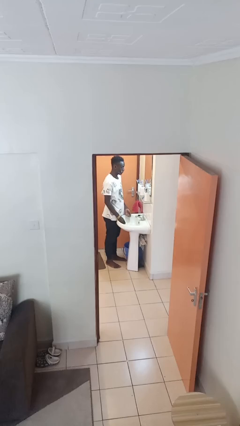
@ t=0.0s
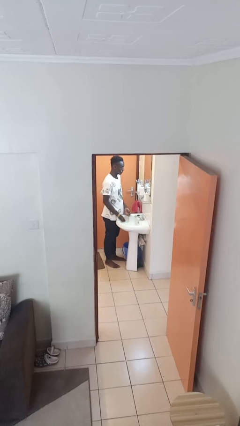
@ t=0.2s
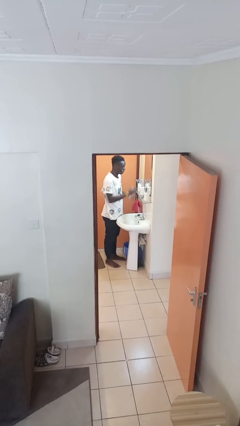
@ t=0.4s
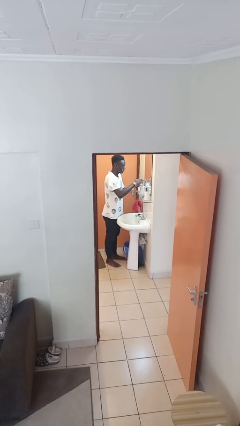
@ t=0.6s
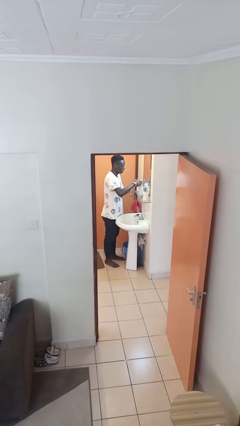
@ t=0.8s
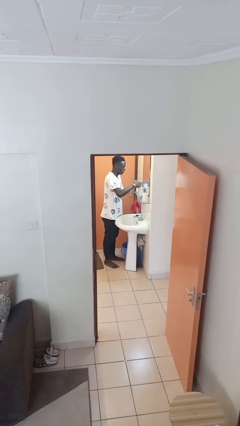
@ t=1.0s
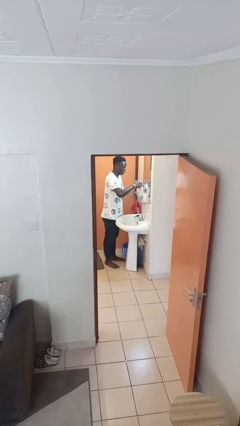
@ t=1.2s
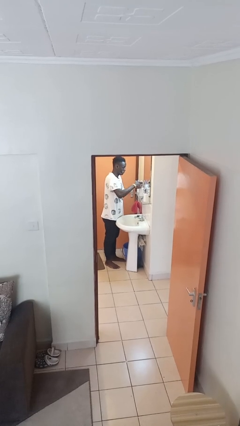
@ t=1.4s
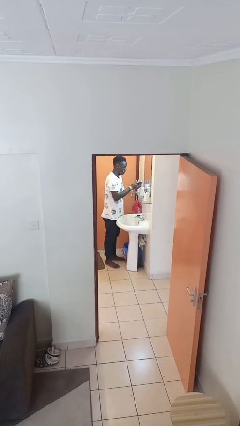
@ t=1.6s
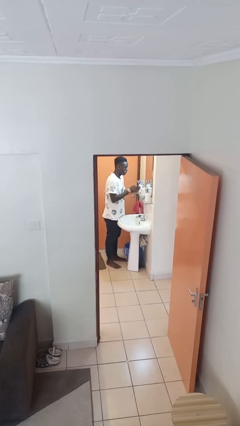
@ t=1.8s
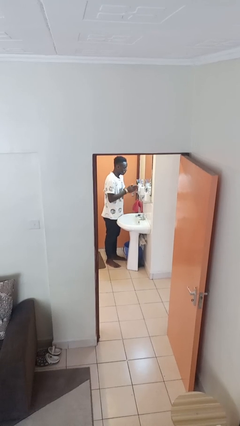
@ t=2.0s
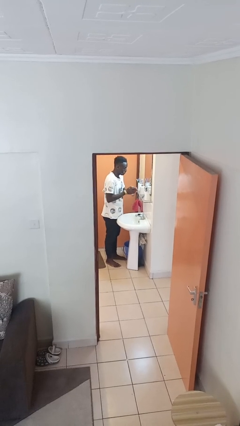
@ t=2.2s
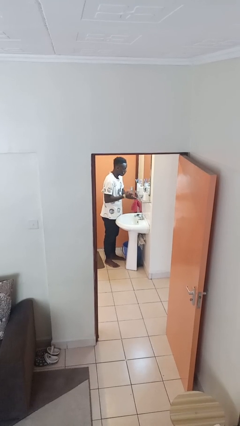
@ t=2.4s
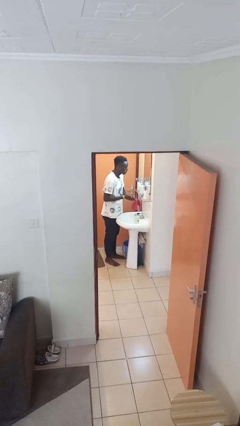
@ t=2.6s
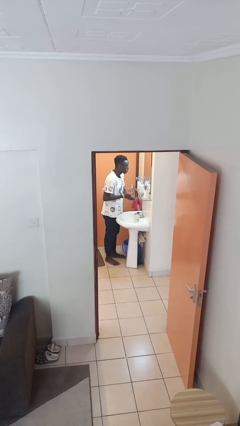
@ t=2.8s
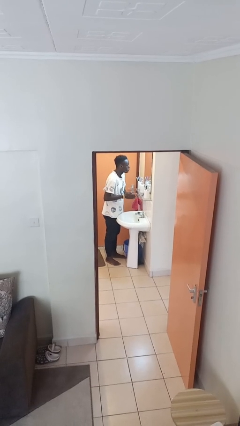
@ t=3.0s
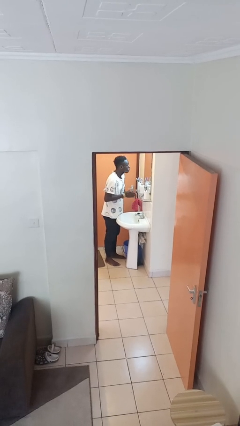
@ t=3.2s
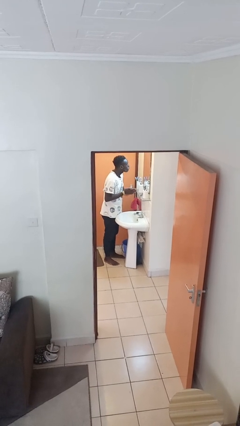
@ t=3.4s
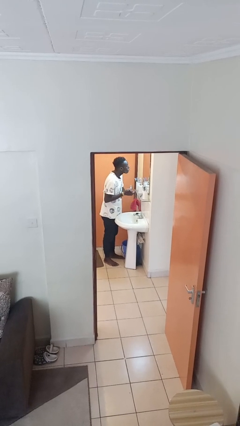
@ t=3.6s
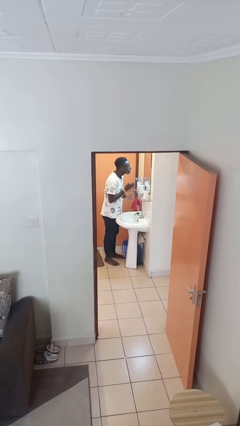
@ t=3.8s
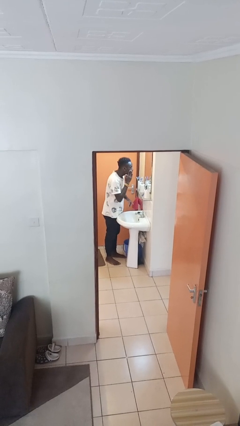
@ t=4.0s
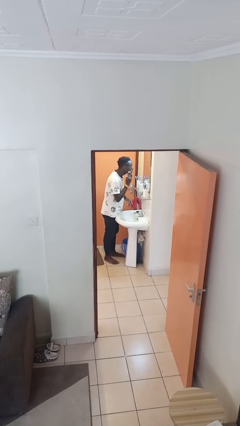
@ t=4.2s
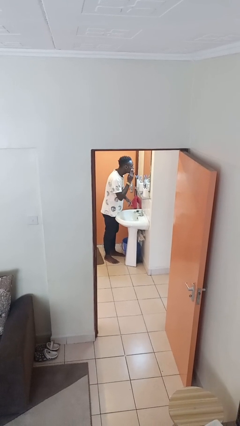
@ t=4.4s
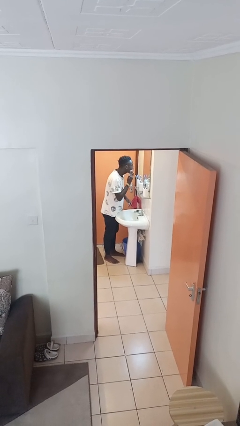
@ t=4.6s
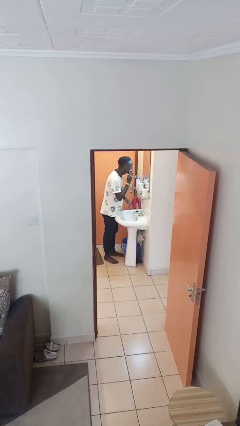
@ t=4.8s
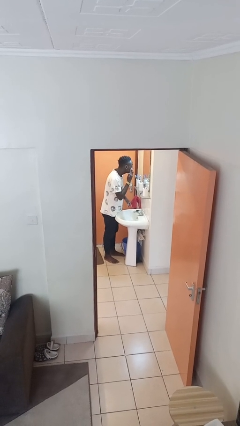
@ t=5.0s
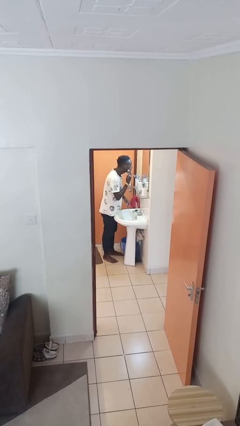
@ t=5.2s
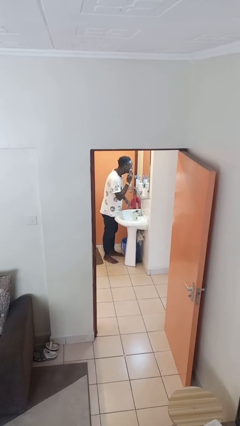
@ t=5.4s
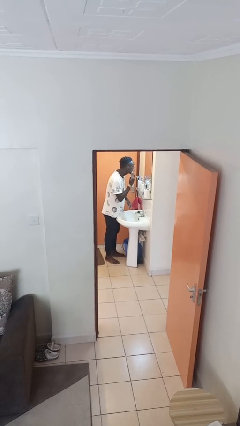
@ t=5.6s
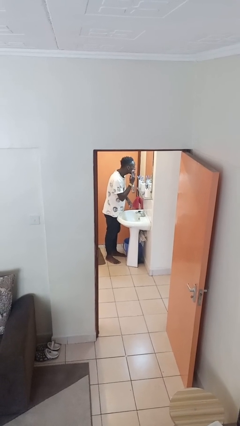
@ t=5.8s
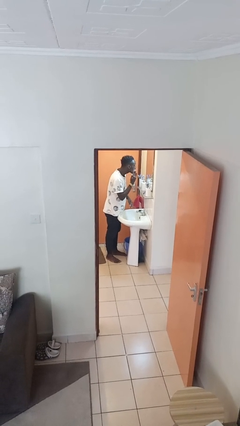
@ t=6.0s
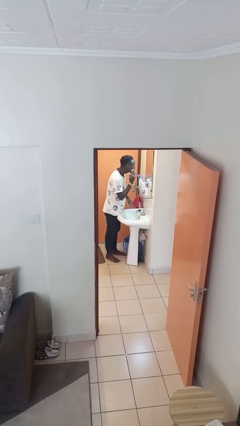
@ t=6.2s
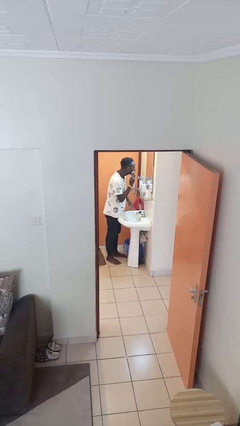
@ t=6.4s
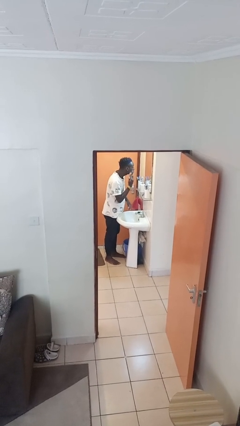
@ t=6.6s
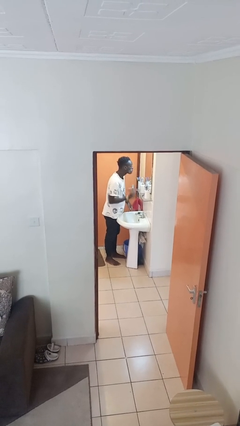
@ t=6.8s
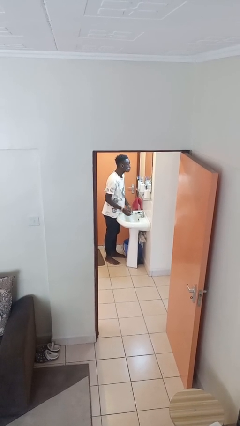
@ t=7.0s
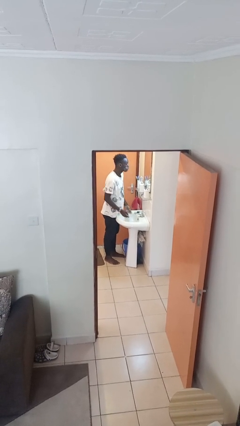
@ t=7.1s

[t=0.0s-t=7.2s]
person applies shaving cream

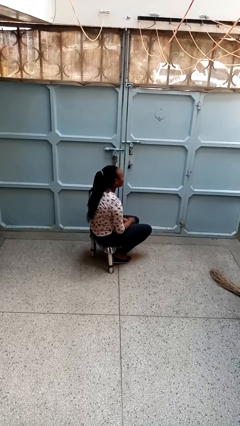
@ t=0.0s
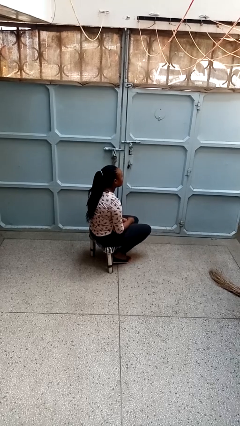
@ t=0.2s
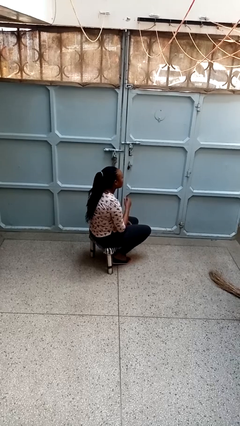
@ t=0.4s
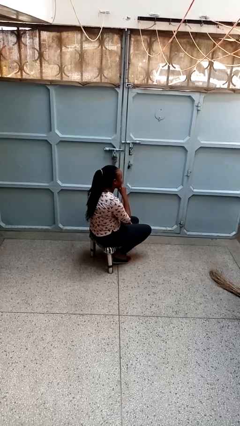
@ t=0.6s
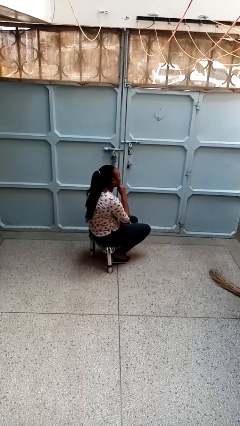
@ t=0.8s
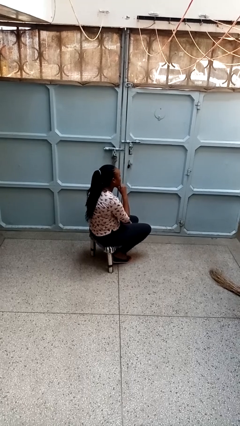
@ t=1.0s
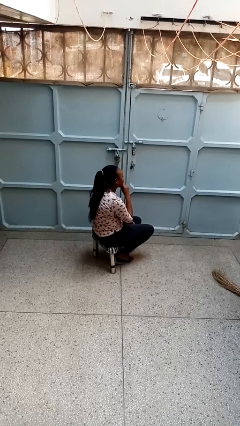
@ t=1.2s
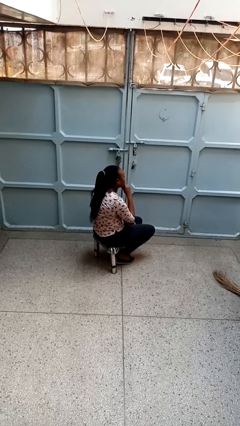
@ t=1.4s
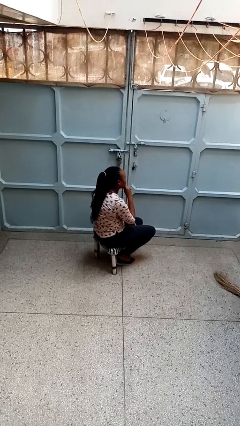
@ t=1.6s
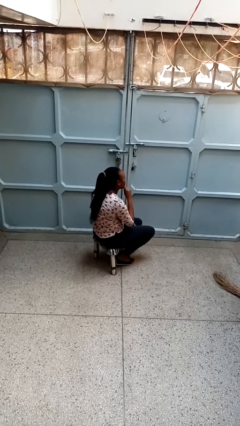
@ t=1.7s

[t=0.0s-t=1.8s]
person strokes chin

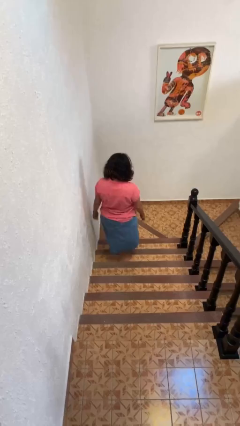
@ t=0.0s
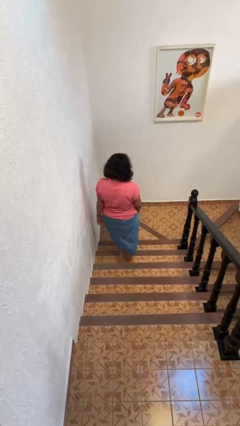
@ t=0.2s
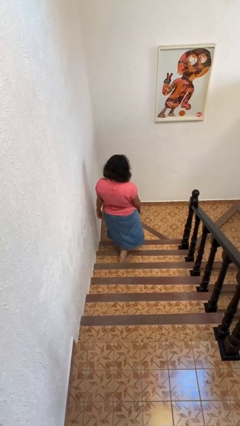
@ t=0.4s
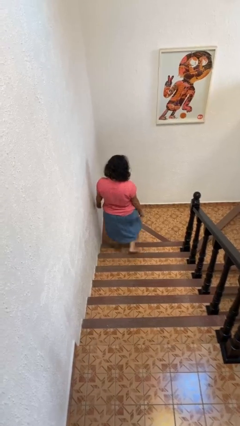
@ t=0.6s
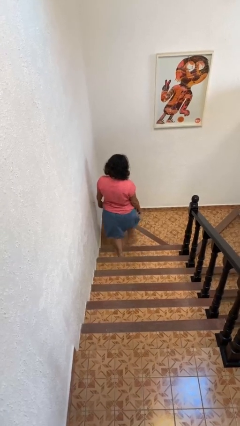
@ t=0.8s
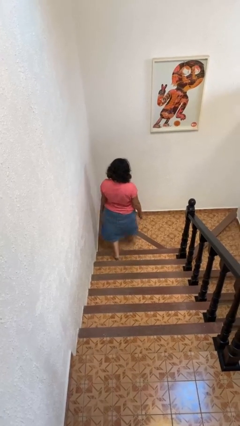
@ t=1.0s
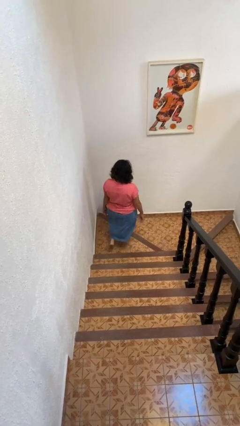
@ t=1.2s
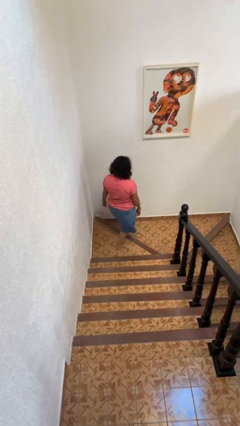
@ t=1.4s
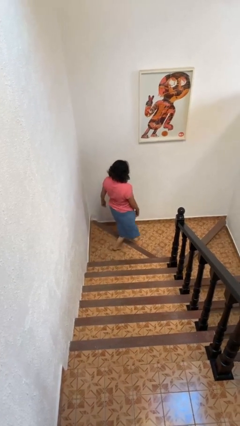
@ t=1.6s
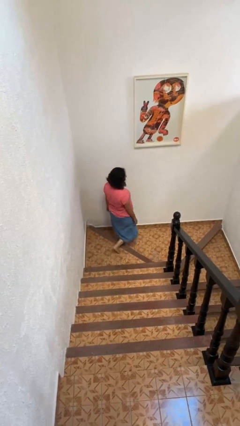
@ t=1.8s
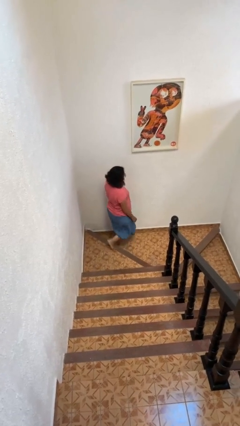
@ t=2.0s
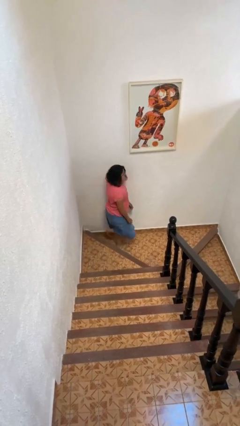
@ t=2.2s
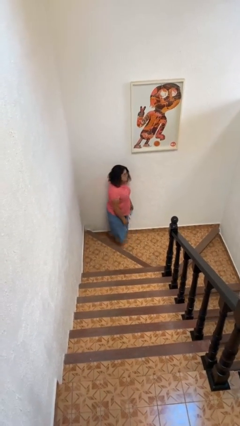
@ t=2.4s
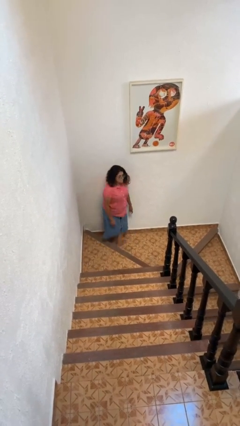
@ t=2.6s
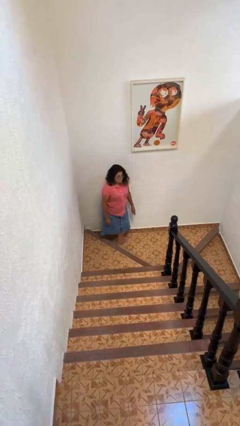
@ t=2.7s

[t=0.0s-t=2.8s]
person climbs down stairs

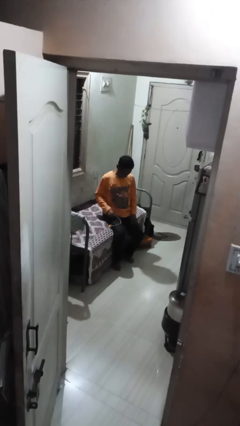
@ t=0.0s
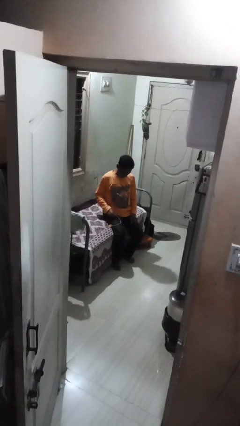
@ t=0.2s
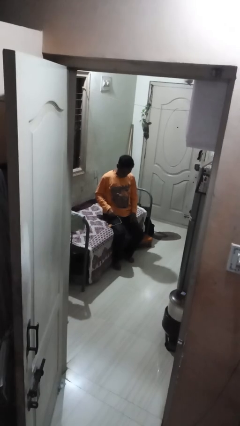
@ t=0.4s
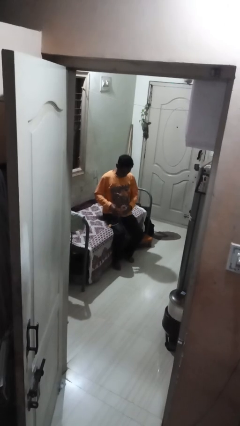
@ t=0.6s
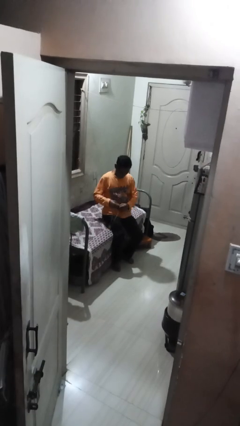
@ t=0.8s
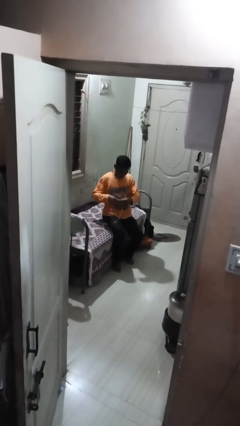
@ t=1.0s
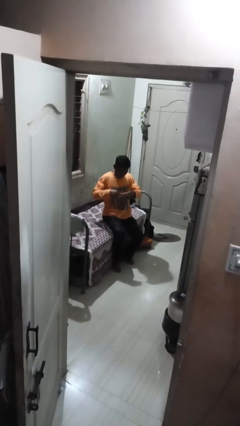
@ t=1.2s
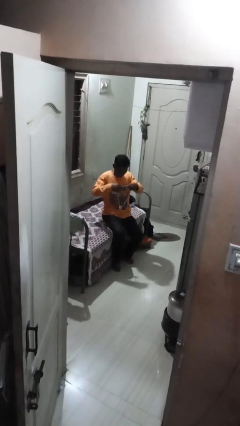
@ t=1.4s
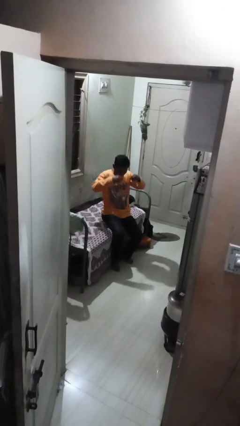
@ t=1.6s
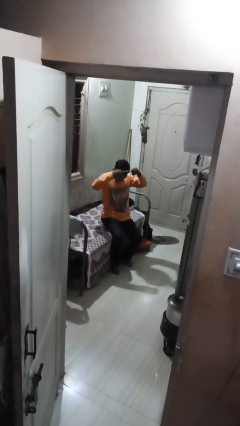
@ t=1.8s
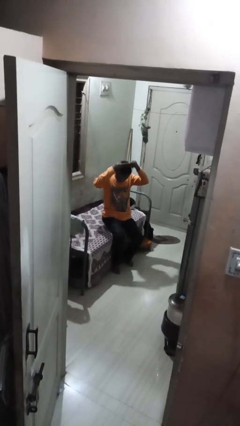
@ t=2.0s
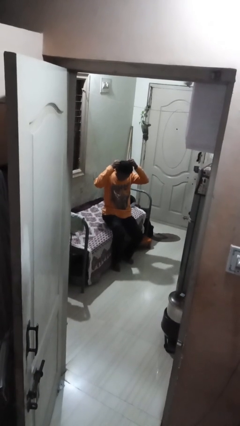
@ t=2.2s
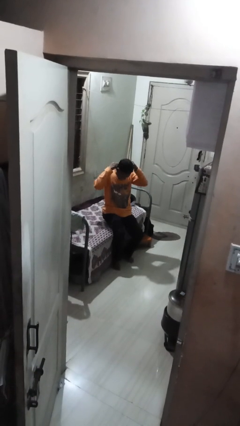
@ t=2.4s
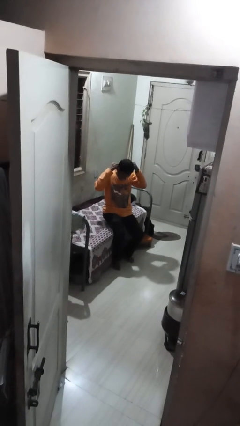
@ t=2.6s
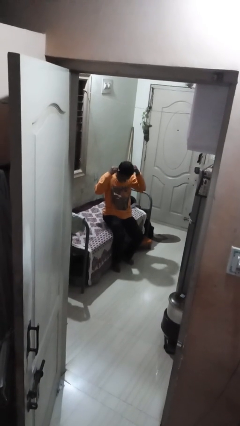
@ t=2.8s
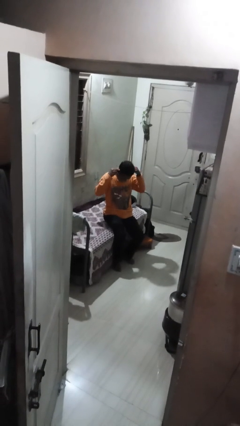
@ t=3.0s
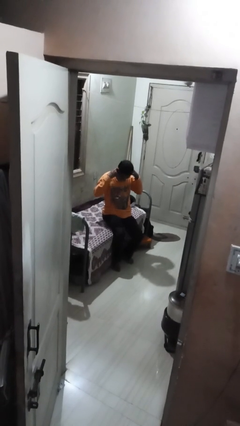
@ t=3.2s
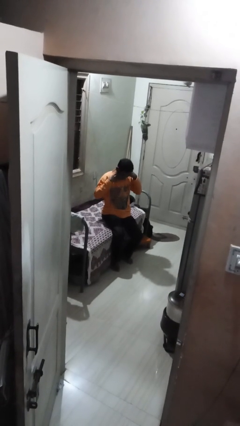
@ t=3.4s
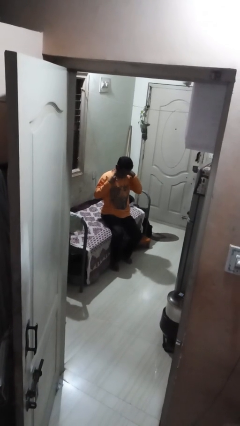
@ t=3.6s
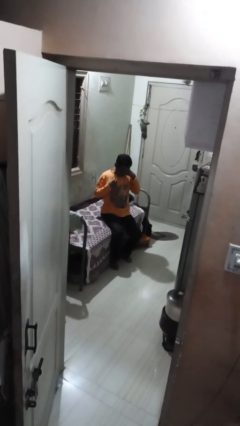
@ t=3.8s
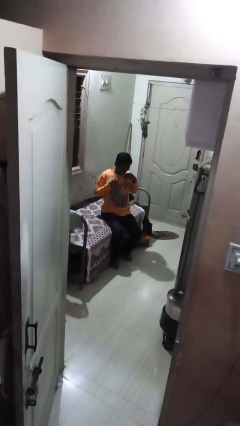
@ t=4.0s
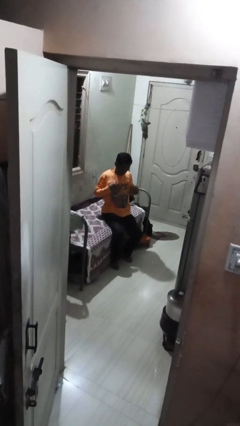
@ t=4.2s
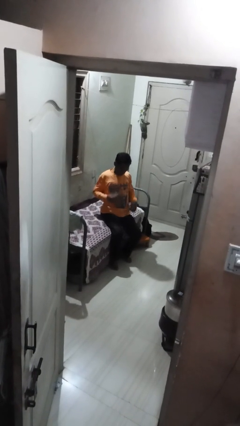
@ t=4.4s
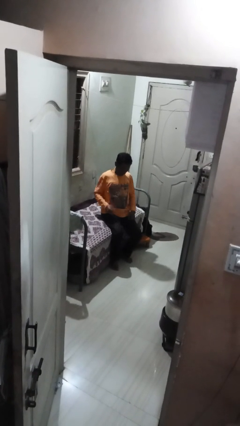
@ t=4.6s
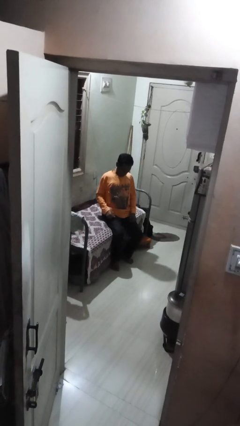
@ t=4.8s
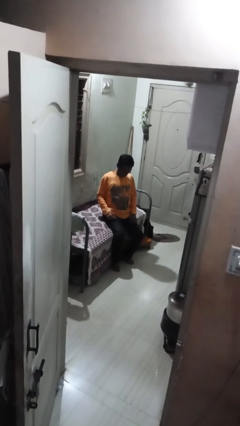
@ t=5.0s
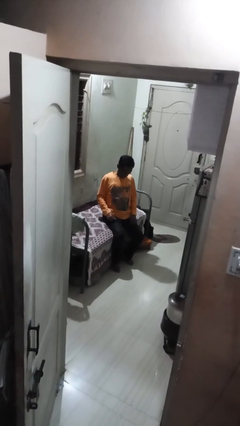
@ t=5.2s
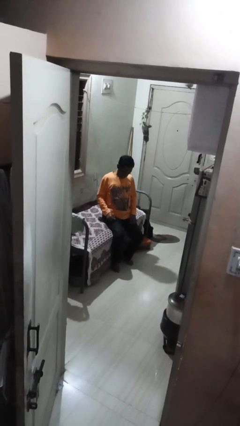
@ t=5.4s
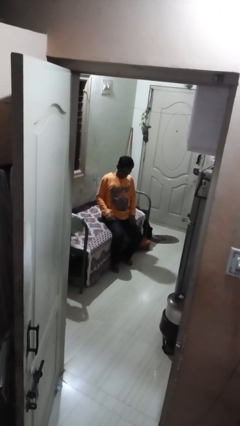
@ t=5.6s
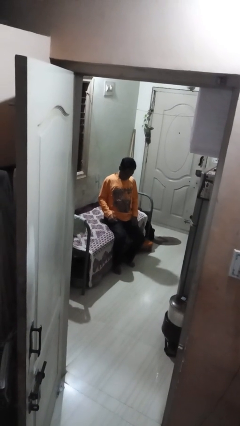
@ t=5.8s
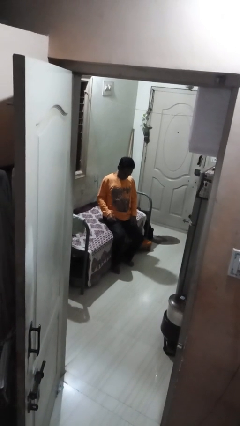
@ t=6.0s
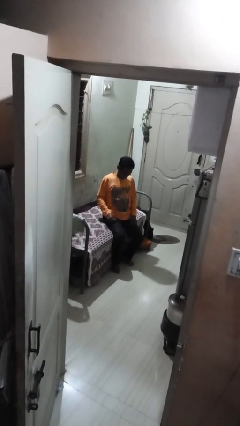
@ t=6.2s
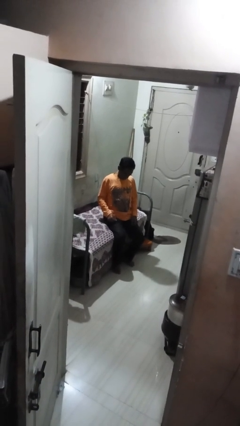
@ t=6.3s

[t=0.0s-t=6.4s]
person puts on necklace
